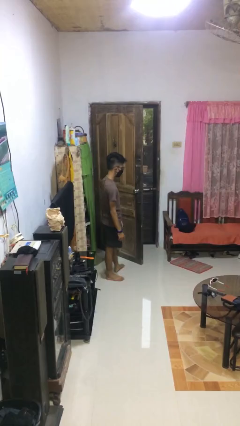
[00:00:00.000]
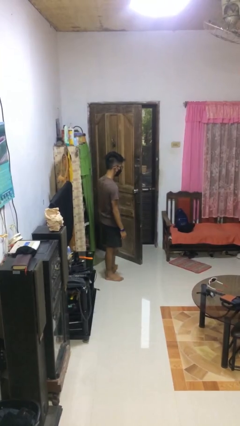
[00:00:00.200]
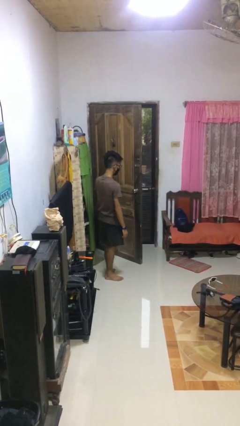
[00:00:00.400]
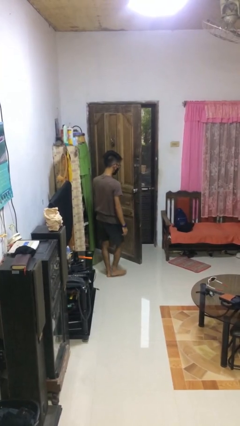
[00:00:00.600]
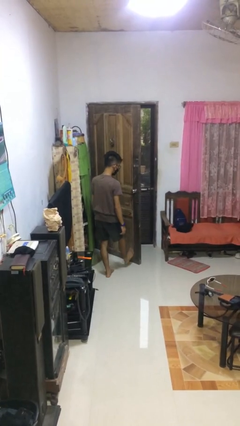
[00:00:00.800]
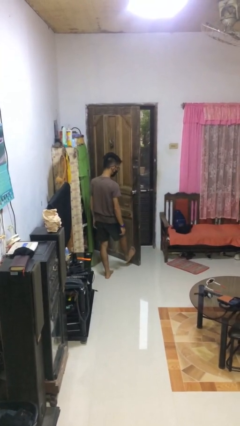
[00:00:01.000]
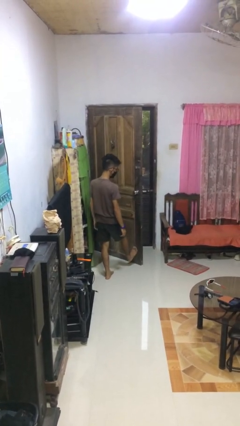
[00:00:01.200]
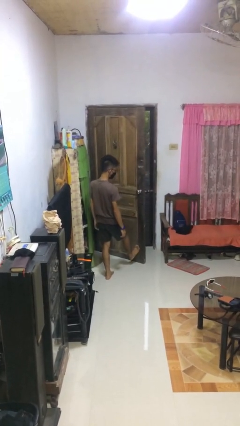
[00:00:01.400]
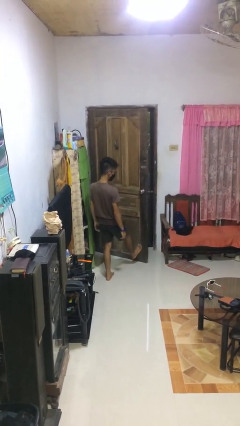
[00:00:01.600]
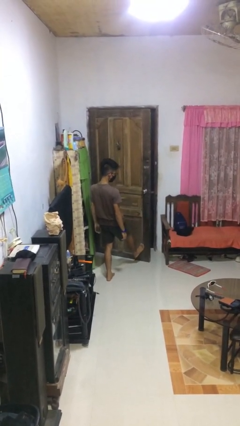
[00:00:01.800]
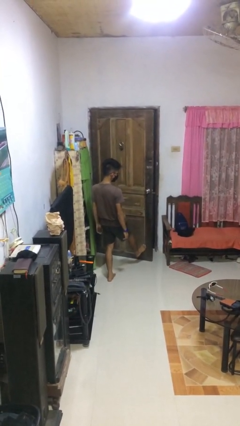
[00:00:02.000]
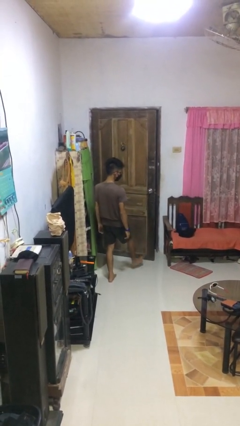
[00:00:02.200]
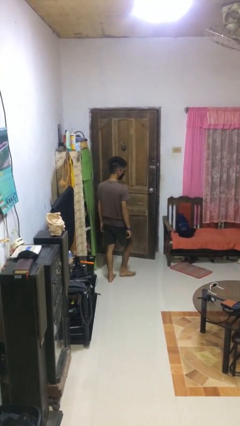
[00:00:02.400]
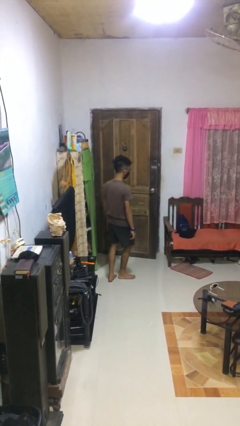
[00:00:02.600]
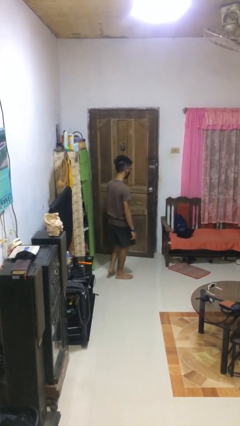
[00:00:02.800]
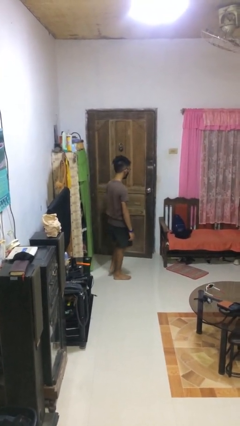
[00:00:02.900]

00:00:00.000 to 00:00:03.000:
person closes door with foot

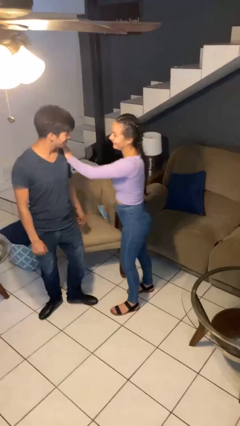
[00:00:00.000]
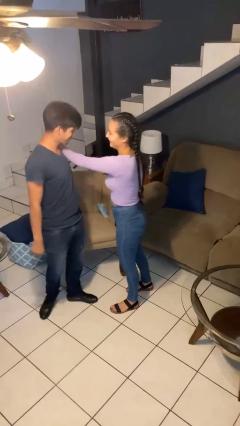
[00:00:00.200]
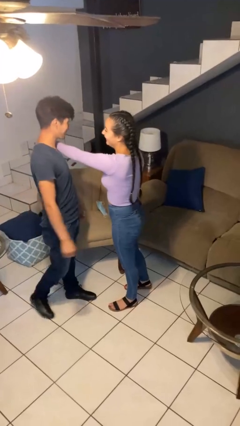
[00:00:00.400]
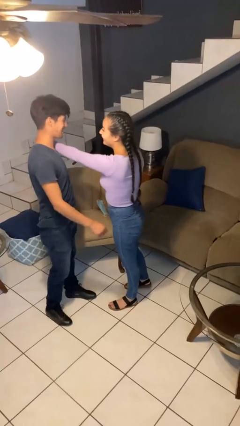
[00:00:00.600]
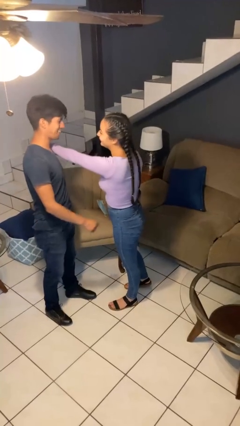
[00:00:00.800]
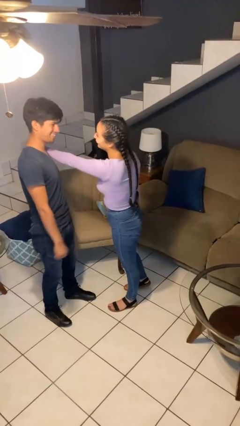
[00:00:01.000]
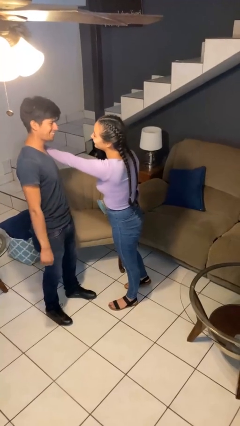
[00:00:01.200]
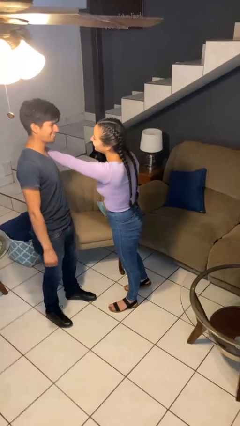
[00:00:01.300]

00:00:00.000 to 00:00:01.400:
person spins person around

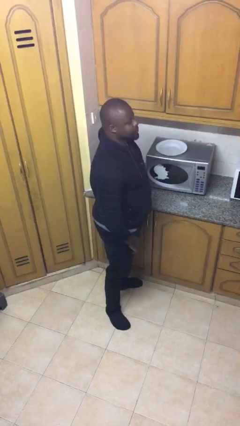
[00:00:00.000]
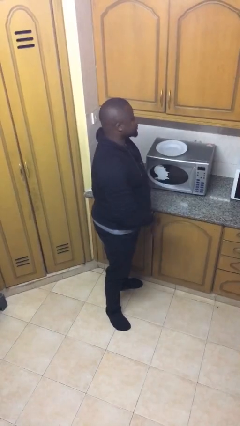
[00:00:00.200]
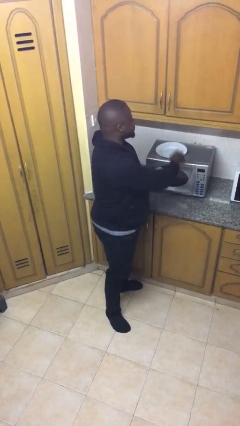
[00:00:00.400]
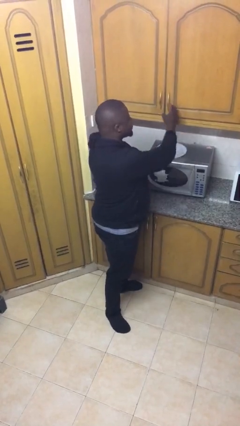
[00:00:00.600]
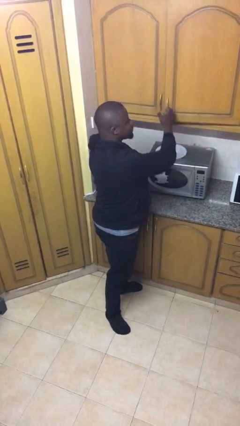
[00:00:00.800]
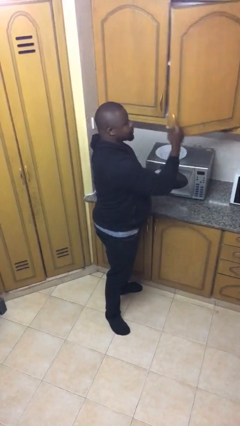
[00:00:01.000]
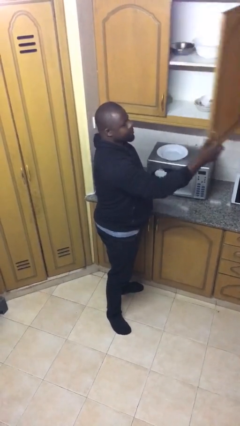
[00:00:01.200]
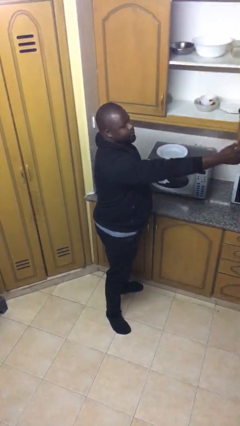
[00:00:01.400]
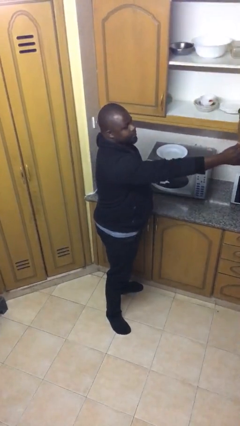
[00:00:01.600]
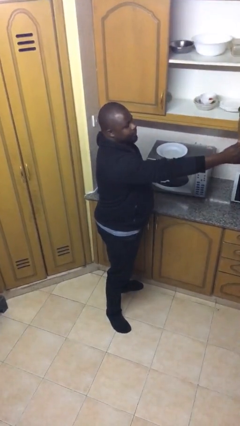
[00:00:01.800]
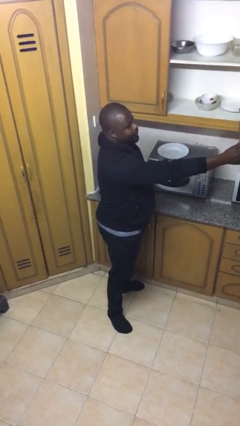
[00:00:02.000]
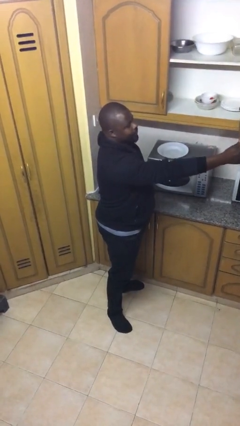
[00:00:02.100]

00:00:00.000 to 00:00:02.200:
person opens cabinet

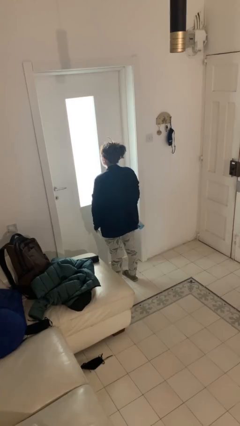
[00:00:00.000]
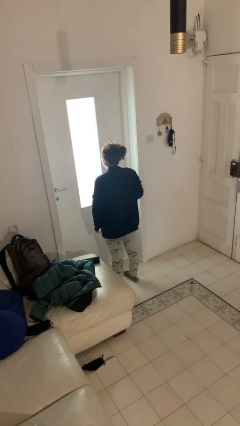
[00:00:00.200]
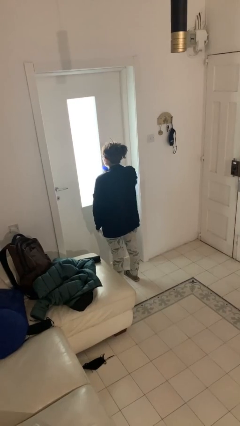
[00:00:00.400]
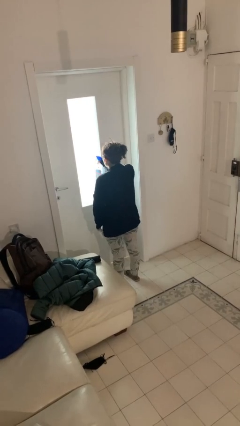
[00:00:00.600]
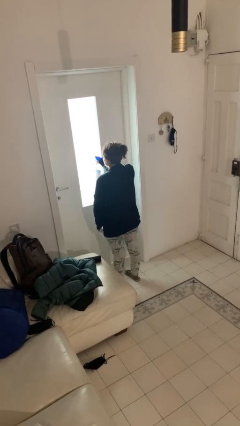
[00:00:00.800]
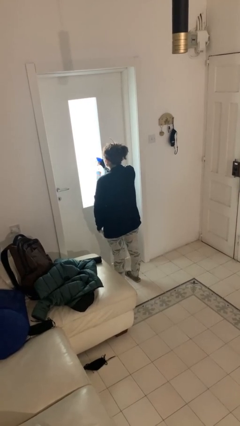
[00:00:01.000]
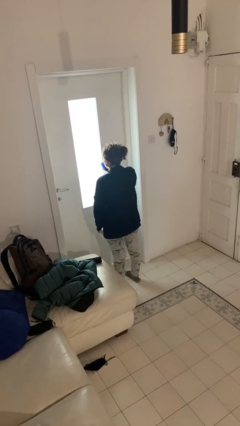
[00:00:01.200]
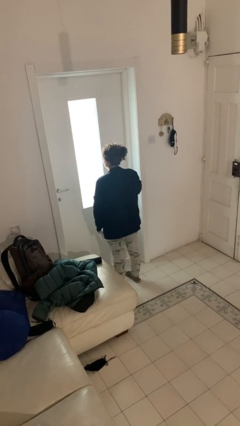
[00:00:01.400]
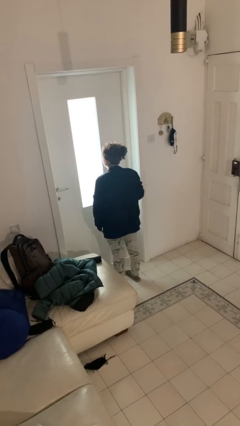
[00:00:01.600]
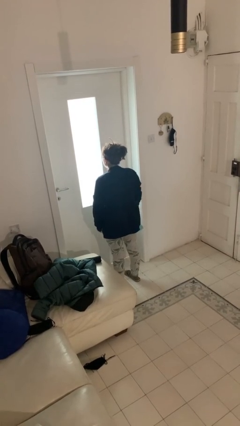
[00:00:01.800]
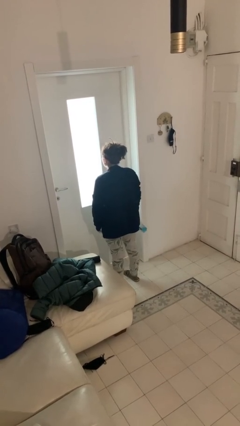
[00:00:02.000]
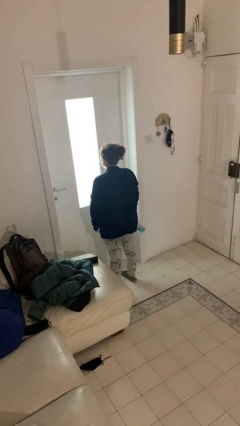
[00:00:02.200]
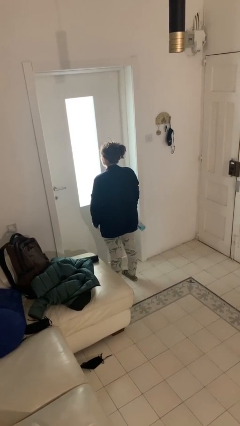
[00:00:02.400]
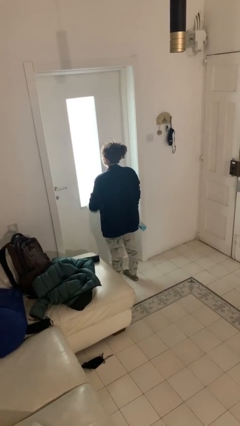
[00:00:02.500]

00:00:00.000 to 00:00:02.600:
person sprays from bottle

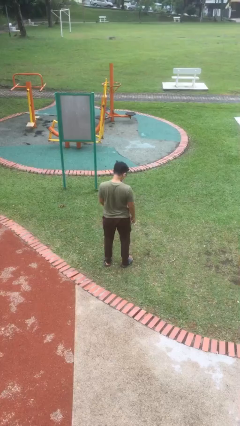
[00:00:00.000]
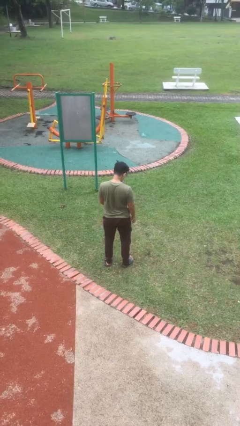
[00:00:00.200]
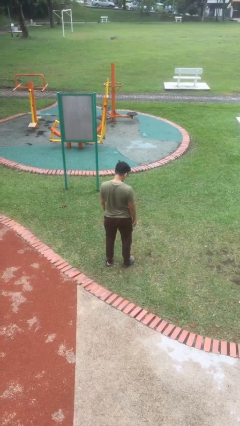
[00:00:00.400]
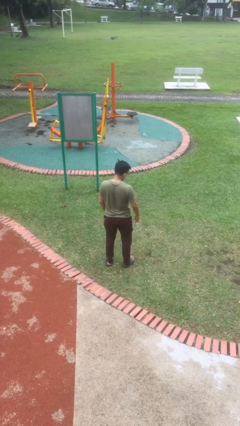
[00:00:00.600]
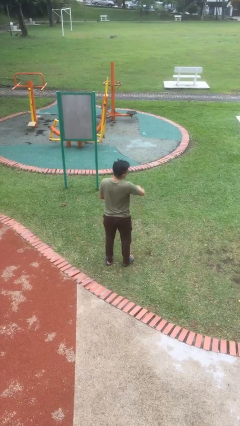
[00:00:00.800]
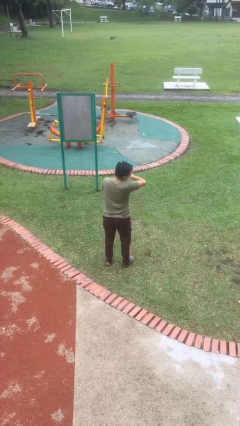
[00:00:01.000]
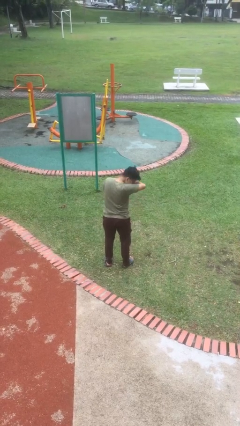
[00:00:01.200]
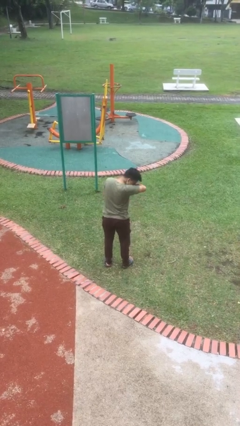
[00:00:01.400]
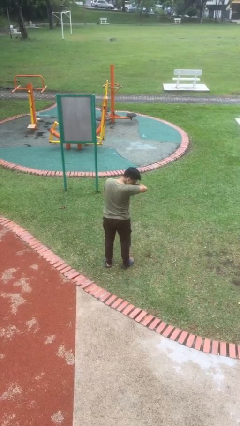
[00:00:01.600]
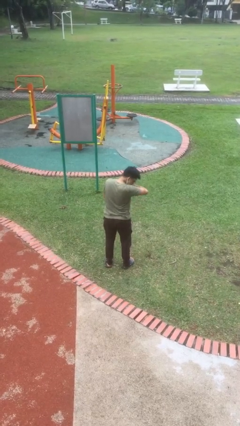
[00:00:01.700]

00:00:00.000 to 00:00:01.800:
person sneezes into arm

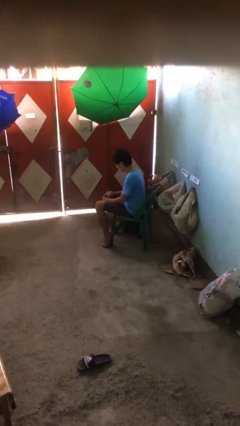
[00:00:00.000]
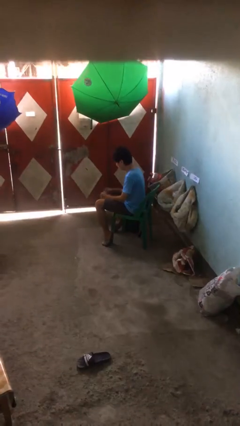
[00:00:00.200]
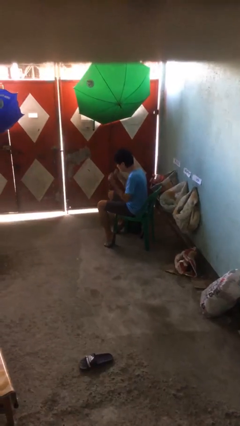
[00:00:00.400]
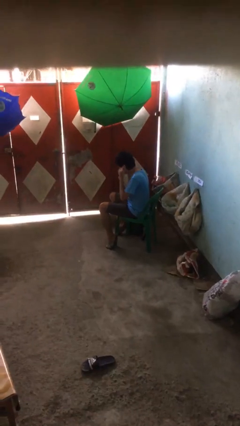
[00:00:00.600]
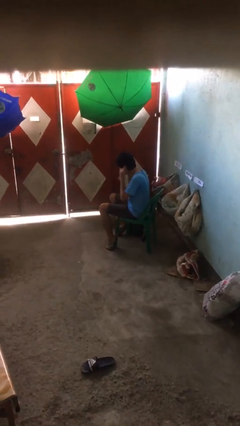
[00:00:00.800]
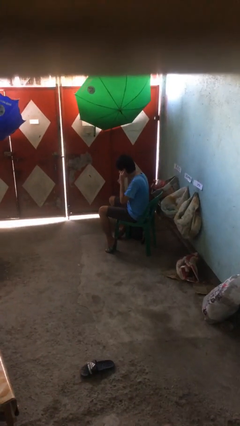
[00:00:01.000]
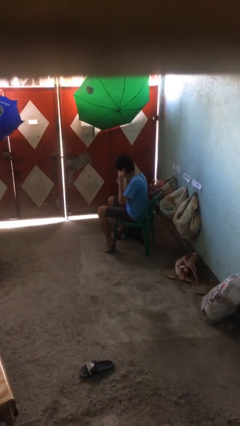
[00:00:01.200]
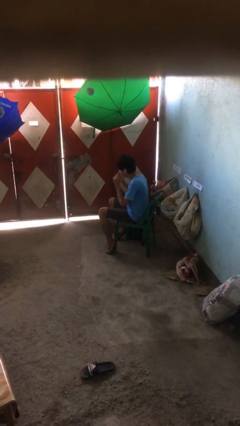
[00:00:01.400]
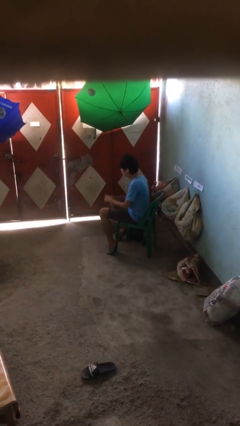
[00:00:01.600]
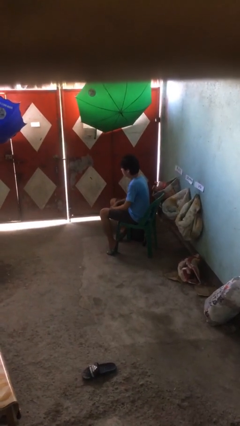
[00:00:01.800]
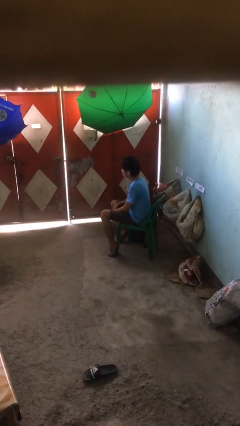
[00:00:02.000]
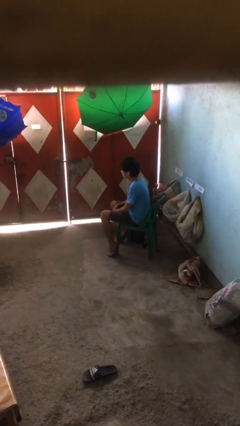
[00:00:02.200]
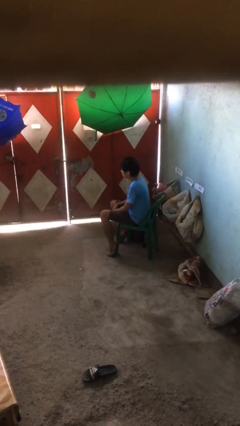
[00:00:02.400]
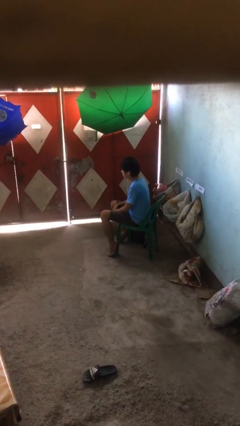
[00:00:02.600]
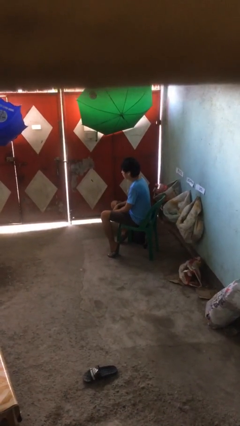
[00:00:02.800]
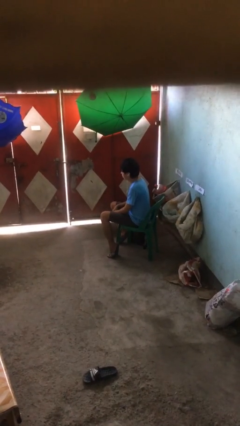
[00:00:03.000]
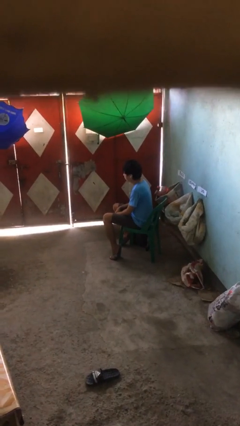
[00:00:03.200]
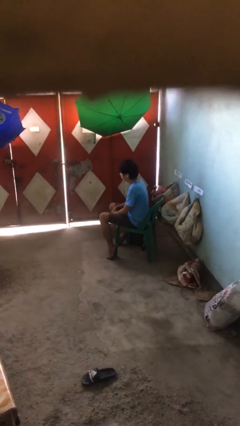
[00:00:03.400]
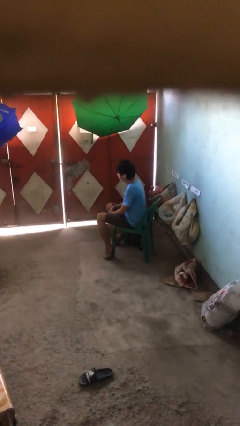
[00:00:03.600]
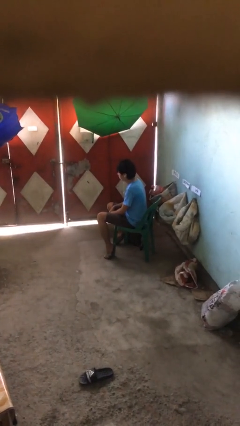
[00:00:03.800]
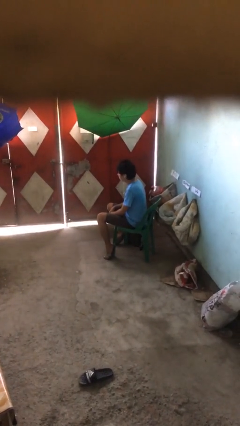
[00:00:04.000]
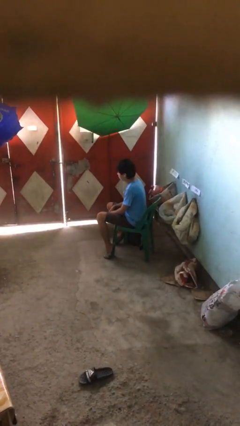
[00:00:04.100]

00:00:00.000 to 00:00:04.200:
person puts on headphones

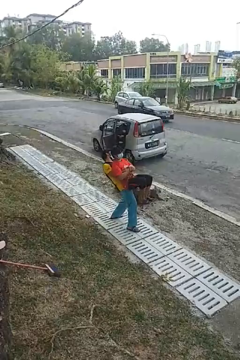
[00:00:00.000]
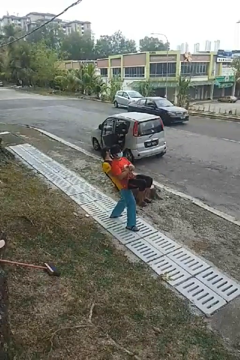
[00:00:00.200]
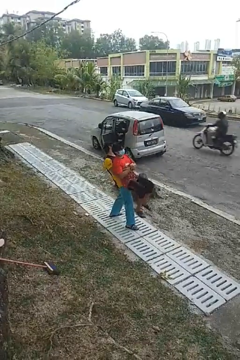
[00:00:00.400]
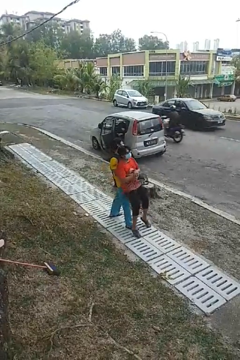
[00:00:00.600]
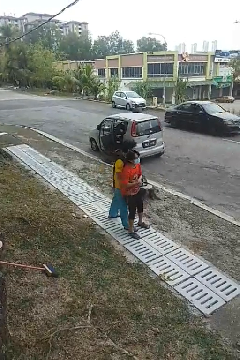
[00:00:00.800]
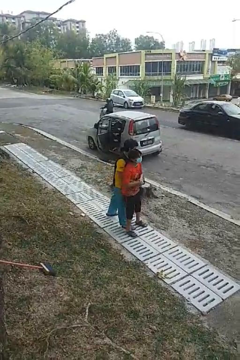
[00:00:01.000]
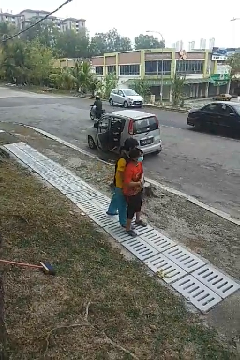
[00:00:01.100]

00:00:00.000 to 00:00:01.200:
person puts down person

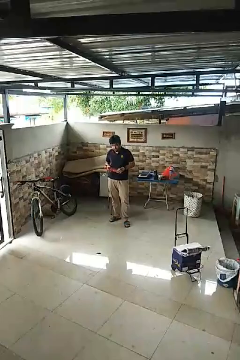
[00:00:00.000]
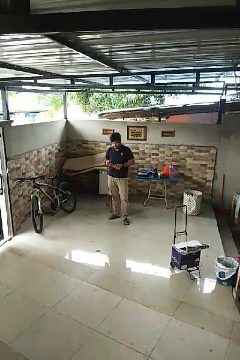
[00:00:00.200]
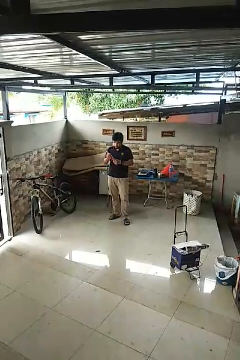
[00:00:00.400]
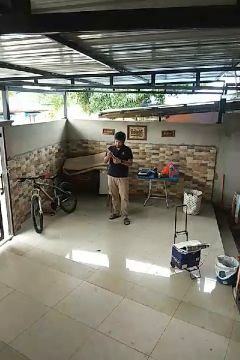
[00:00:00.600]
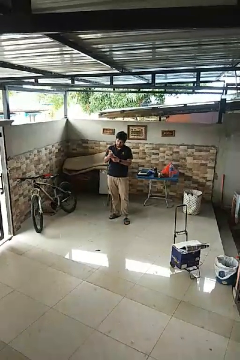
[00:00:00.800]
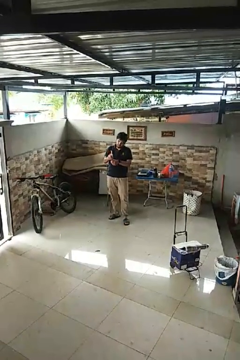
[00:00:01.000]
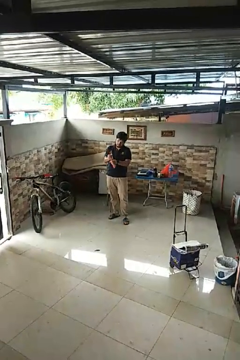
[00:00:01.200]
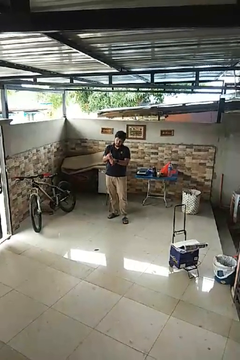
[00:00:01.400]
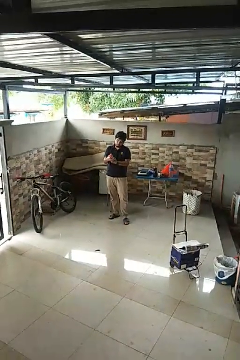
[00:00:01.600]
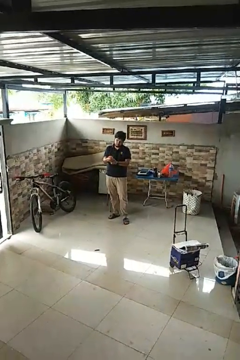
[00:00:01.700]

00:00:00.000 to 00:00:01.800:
person squeezes object
